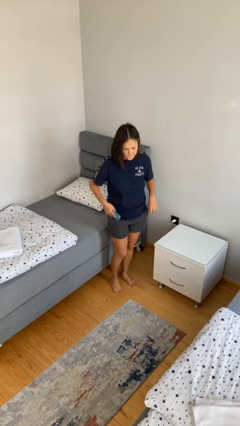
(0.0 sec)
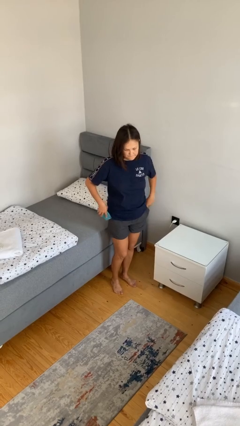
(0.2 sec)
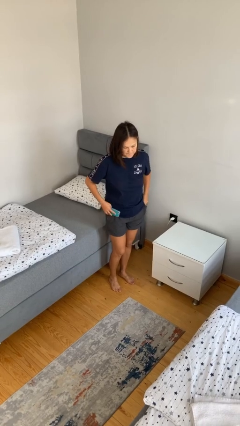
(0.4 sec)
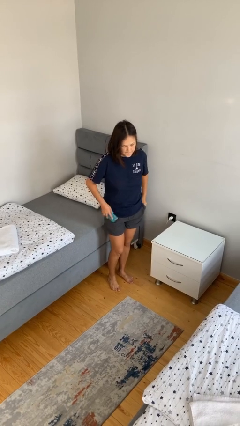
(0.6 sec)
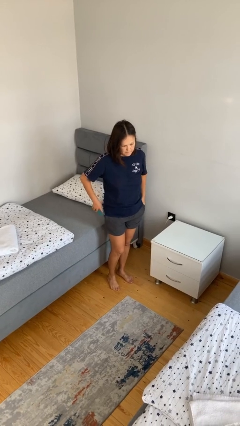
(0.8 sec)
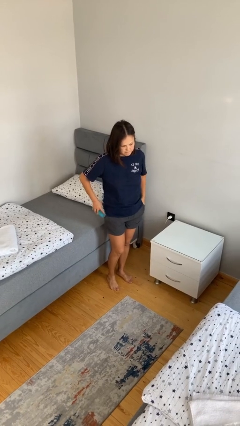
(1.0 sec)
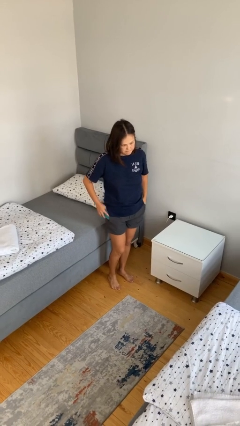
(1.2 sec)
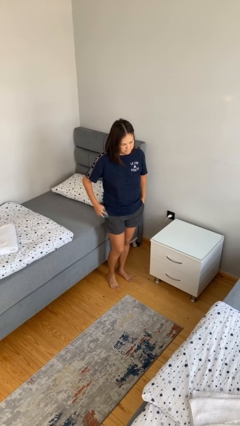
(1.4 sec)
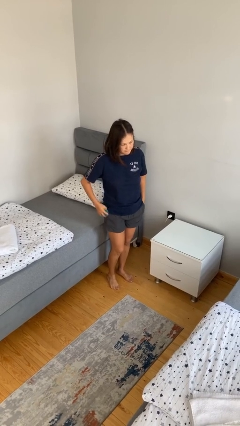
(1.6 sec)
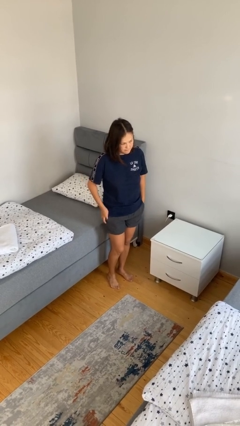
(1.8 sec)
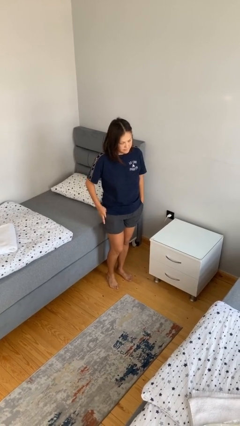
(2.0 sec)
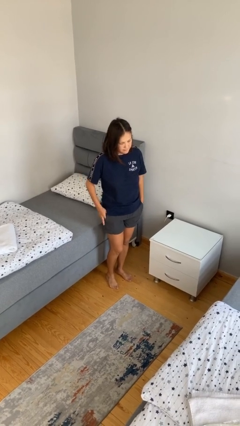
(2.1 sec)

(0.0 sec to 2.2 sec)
person puts phone into pocket

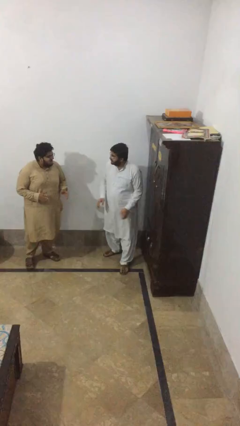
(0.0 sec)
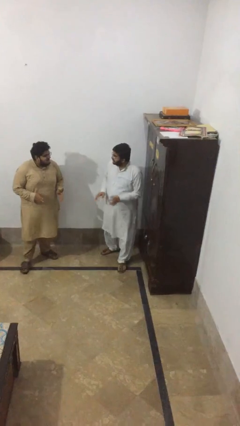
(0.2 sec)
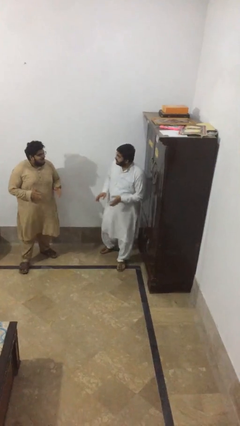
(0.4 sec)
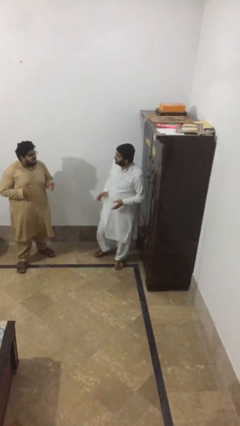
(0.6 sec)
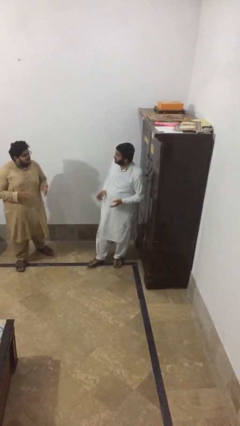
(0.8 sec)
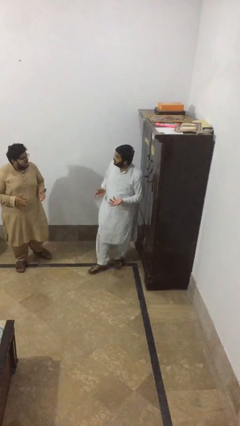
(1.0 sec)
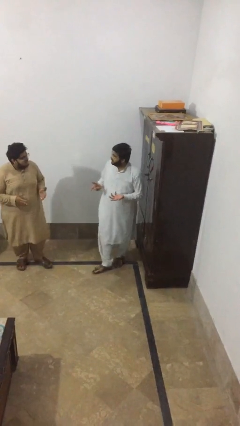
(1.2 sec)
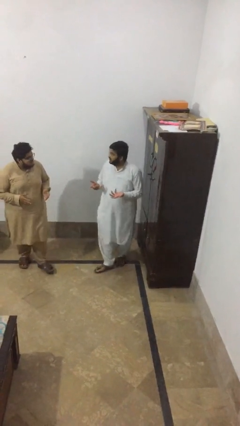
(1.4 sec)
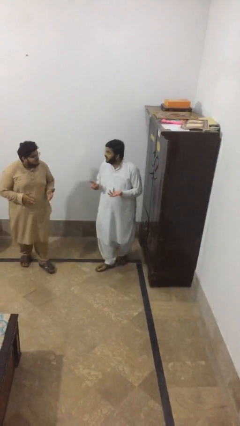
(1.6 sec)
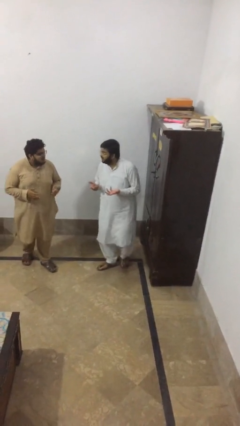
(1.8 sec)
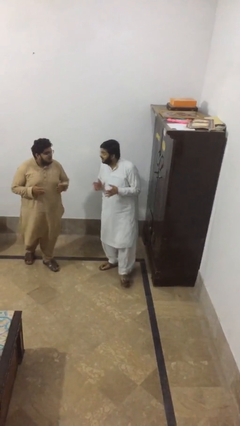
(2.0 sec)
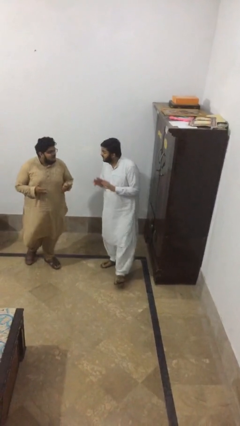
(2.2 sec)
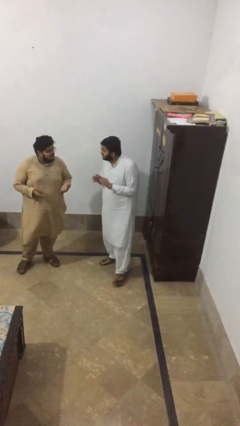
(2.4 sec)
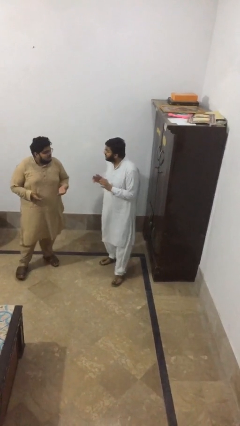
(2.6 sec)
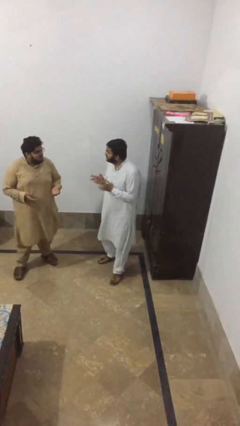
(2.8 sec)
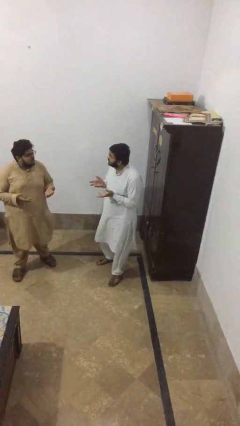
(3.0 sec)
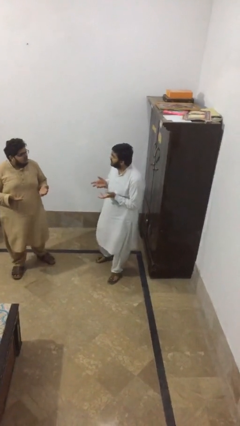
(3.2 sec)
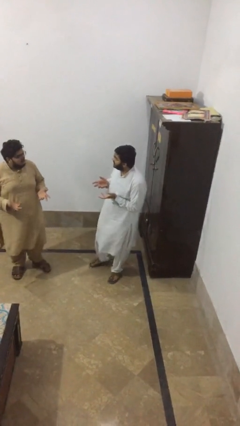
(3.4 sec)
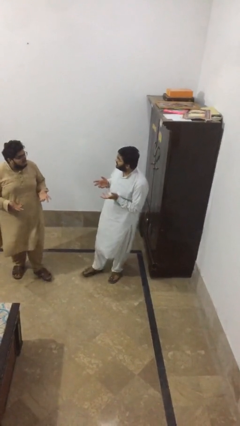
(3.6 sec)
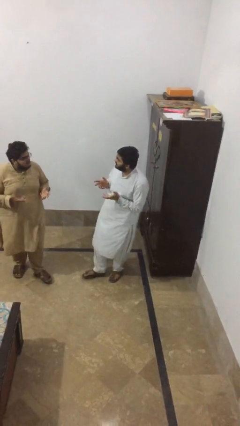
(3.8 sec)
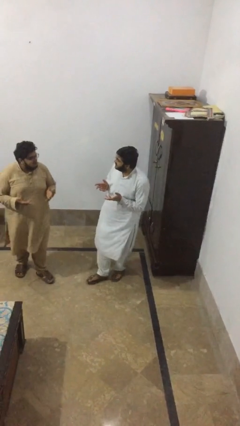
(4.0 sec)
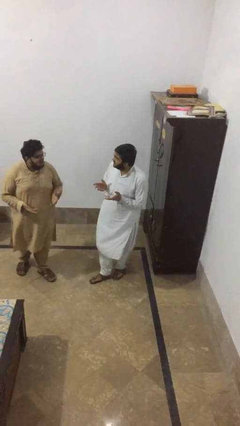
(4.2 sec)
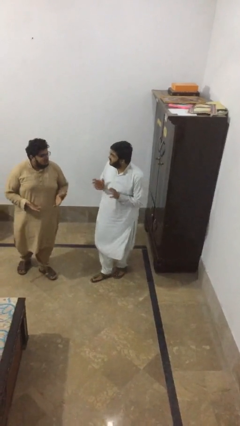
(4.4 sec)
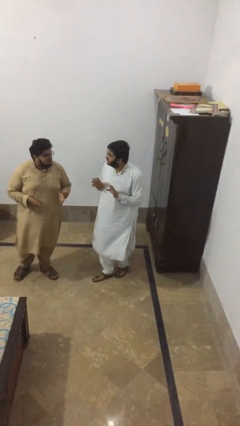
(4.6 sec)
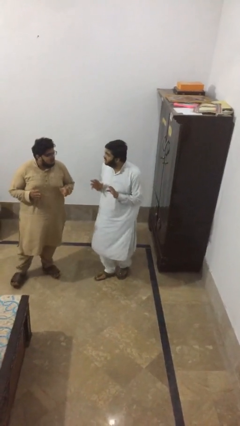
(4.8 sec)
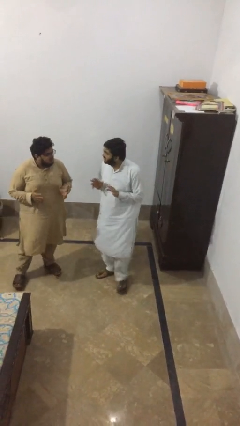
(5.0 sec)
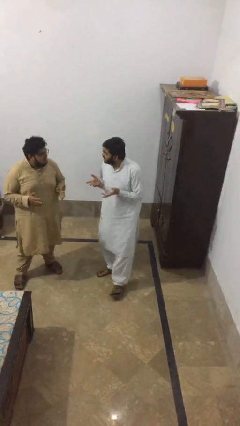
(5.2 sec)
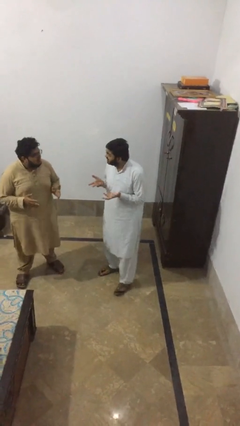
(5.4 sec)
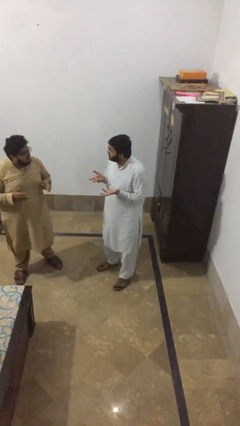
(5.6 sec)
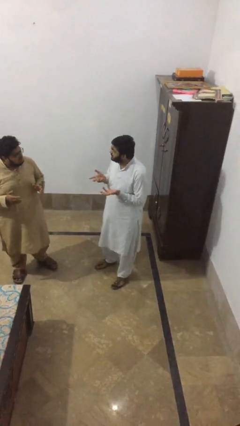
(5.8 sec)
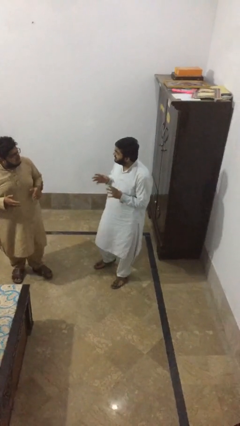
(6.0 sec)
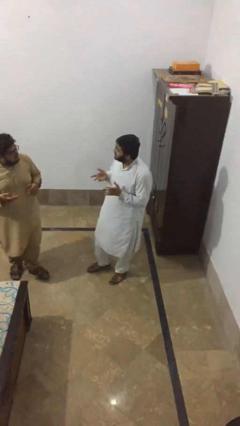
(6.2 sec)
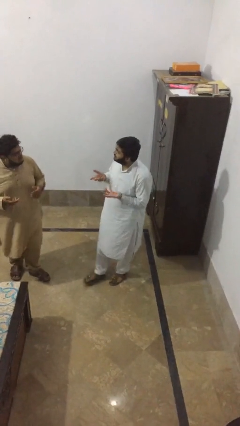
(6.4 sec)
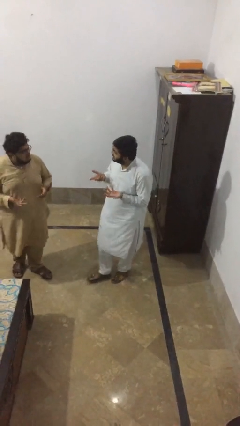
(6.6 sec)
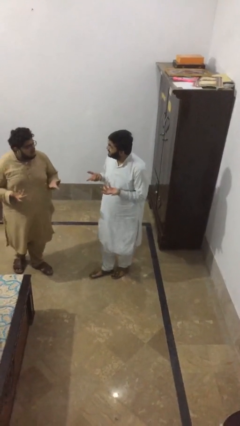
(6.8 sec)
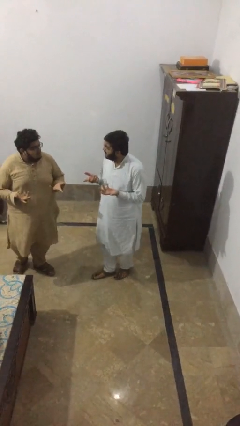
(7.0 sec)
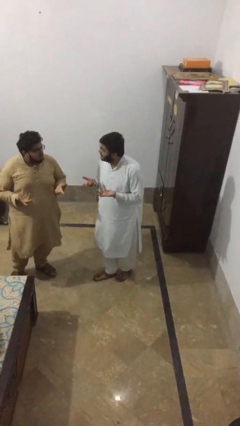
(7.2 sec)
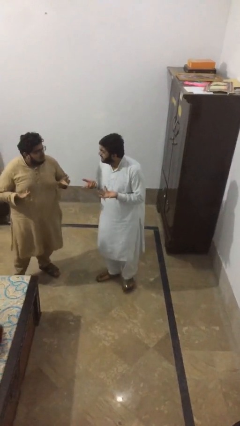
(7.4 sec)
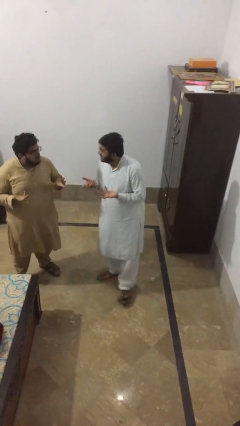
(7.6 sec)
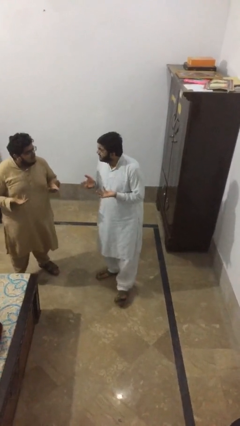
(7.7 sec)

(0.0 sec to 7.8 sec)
person talks to person

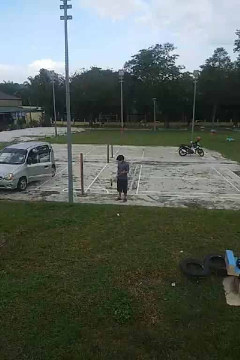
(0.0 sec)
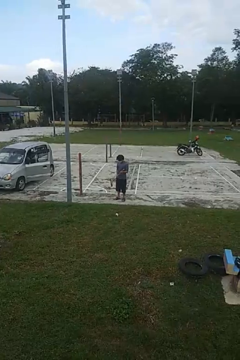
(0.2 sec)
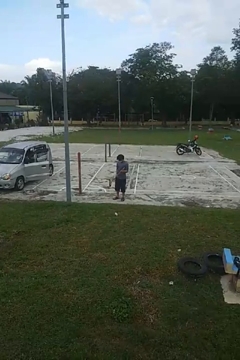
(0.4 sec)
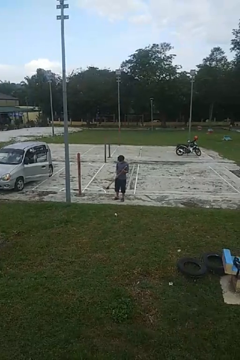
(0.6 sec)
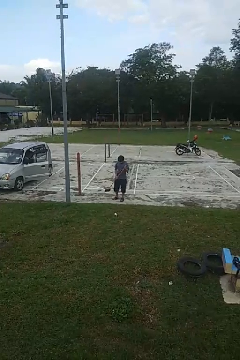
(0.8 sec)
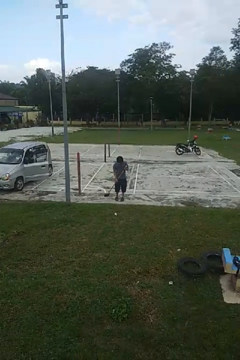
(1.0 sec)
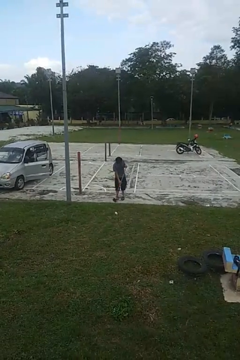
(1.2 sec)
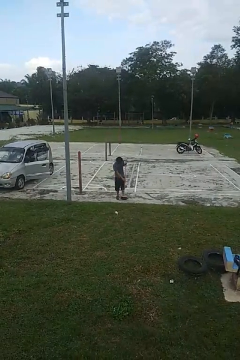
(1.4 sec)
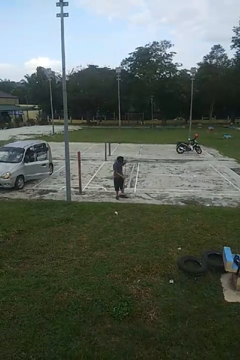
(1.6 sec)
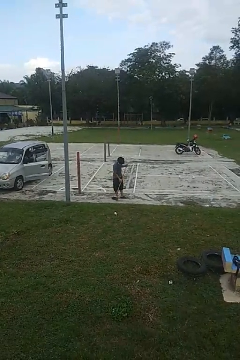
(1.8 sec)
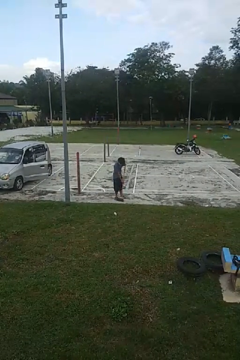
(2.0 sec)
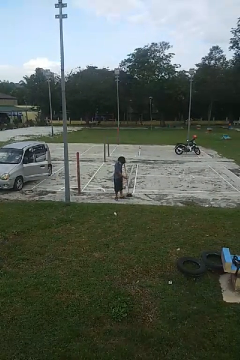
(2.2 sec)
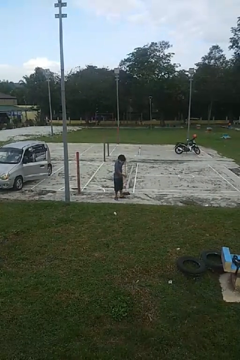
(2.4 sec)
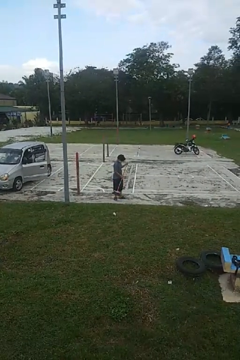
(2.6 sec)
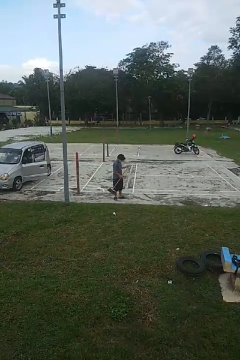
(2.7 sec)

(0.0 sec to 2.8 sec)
person sweeps floor

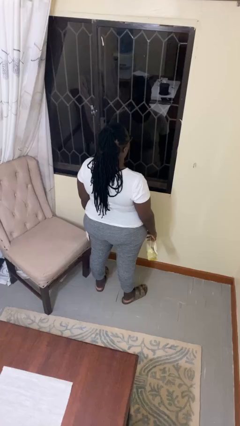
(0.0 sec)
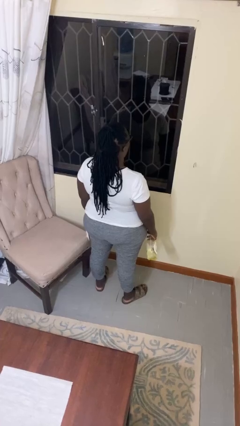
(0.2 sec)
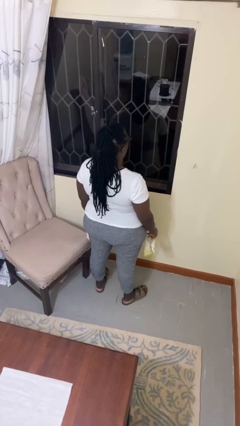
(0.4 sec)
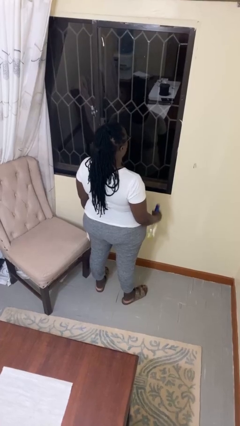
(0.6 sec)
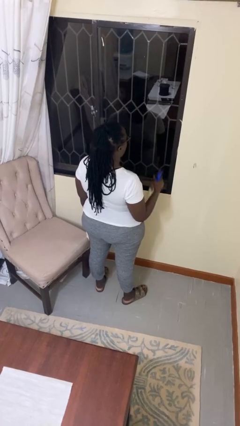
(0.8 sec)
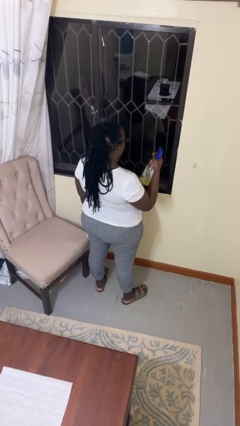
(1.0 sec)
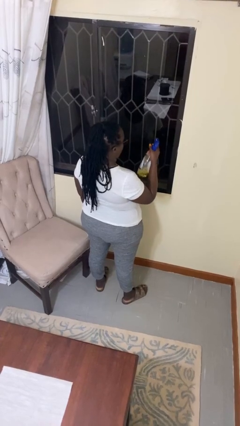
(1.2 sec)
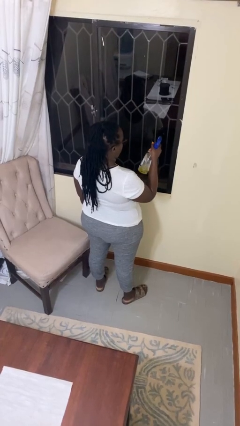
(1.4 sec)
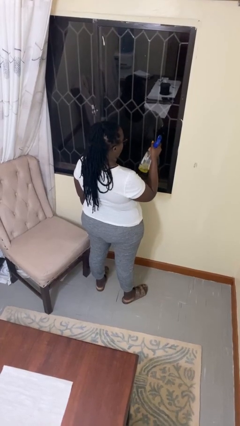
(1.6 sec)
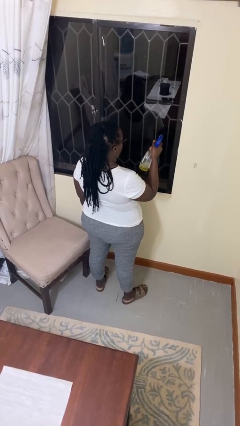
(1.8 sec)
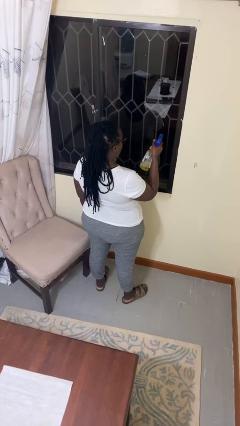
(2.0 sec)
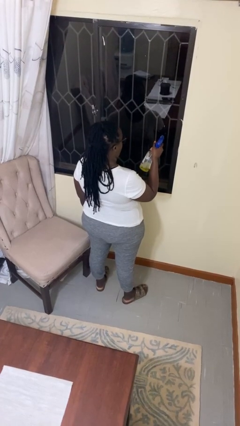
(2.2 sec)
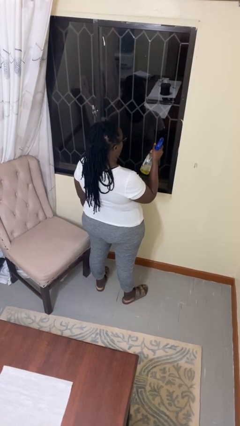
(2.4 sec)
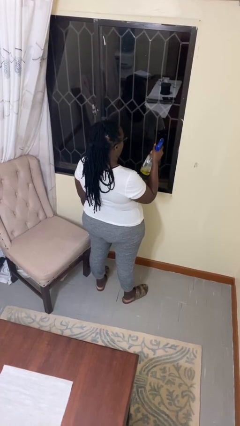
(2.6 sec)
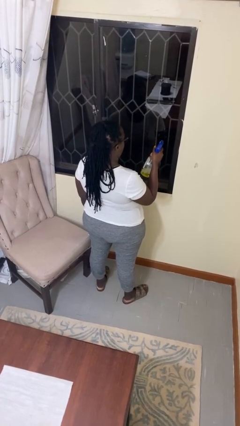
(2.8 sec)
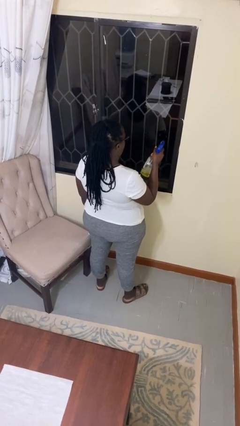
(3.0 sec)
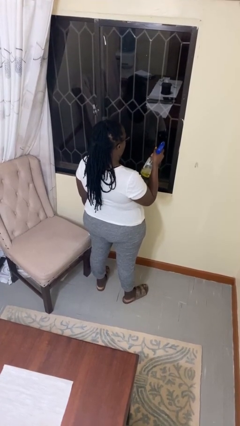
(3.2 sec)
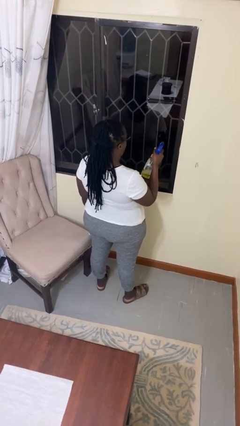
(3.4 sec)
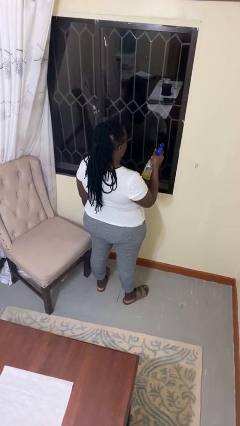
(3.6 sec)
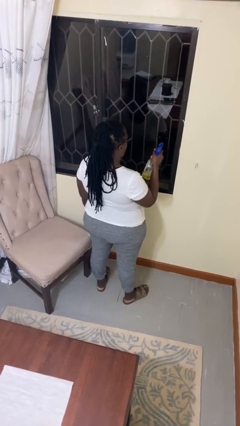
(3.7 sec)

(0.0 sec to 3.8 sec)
person sprays from bottle

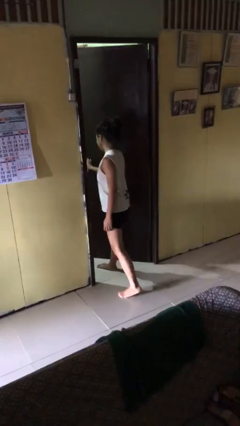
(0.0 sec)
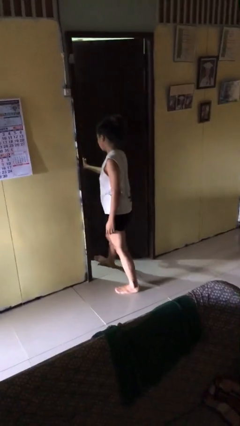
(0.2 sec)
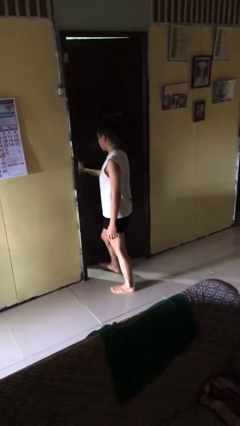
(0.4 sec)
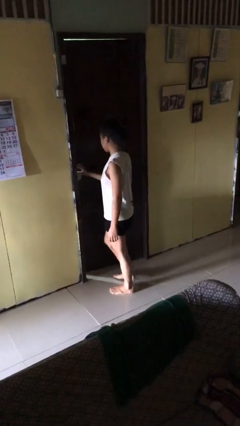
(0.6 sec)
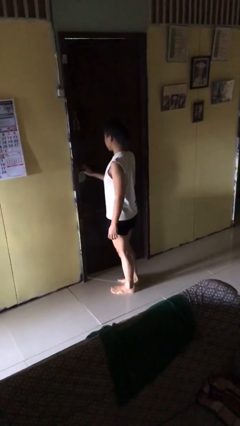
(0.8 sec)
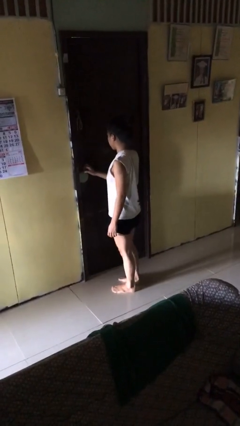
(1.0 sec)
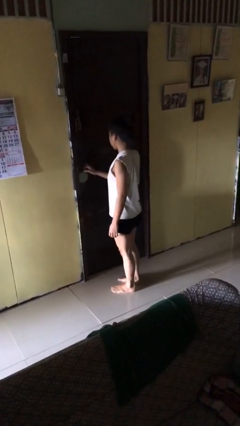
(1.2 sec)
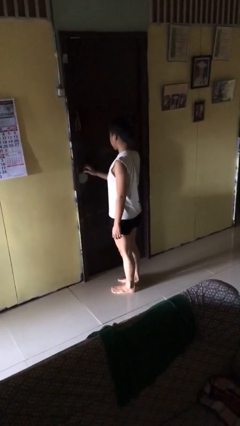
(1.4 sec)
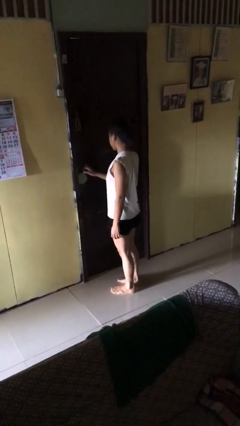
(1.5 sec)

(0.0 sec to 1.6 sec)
person closes facility door
